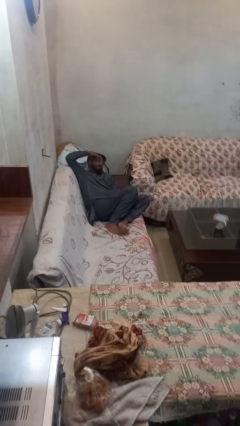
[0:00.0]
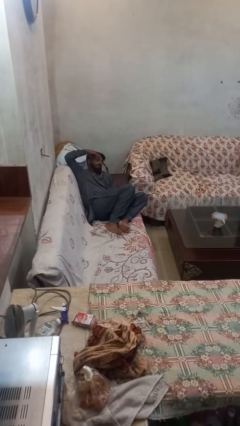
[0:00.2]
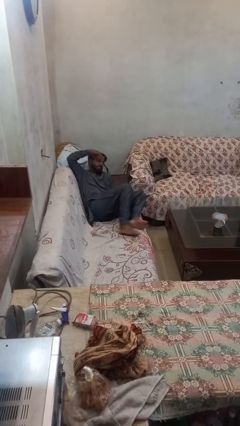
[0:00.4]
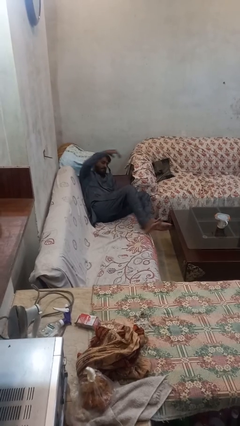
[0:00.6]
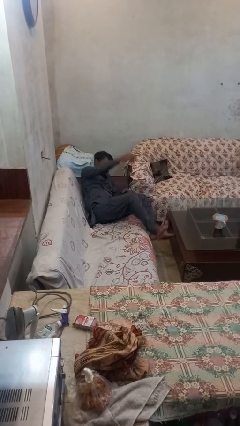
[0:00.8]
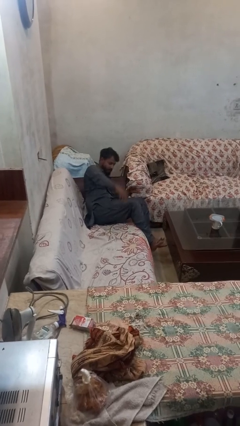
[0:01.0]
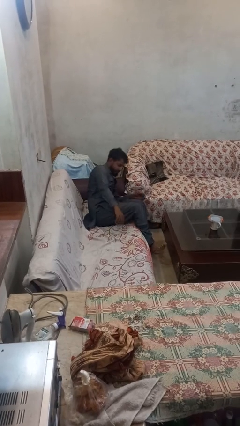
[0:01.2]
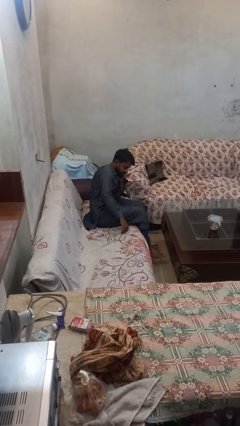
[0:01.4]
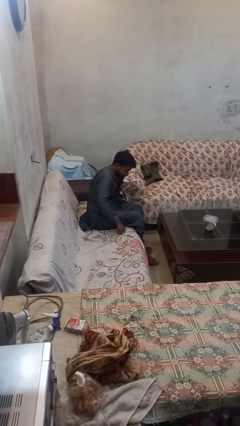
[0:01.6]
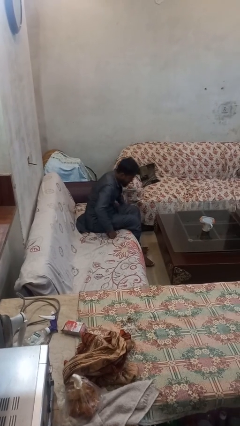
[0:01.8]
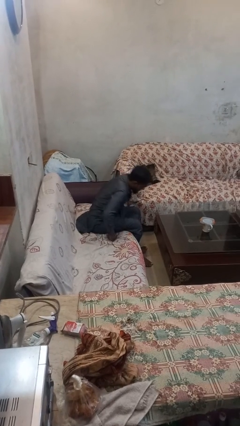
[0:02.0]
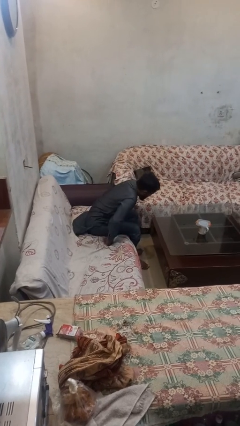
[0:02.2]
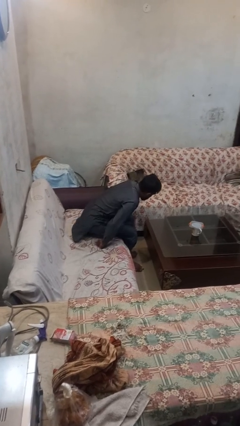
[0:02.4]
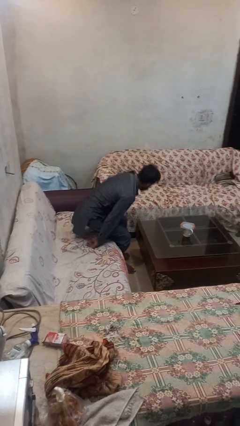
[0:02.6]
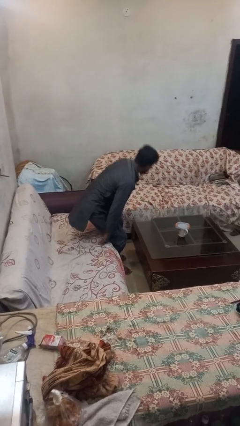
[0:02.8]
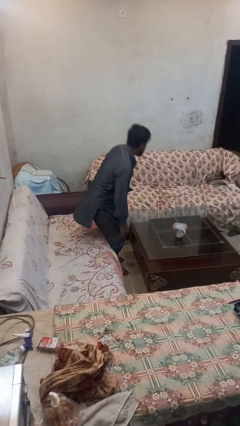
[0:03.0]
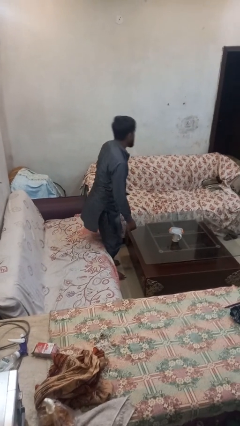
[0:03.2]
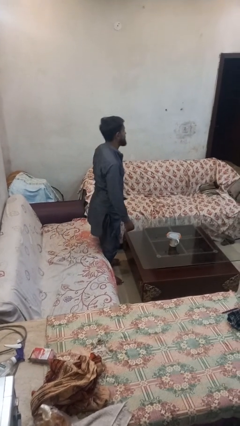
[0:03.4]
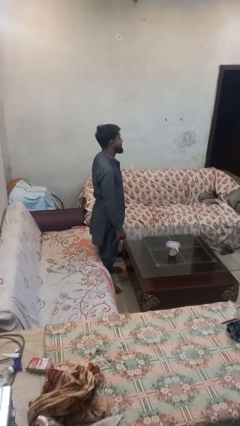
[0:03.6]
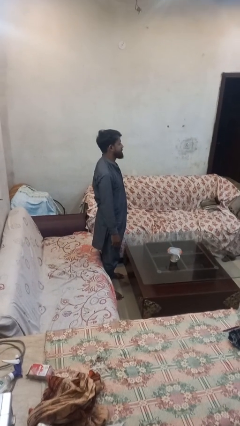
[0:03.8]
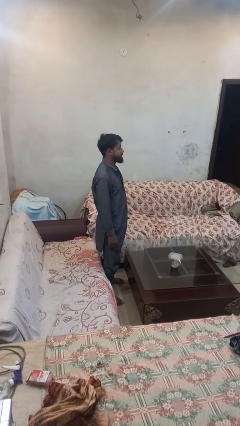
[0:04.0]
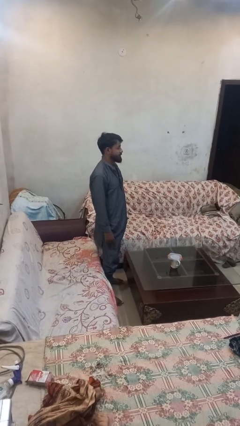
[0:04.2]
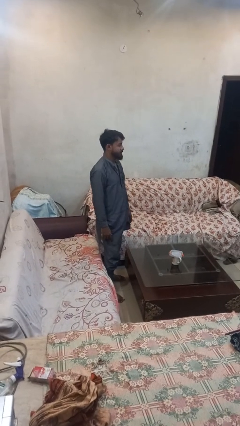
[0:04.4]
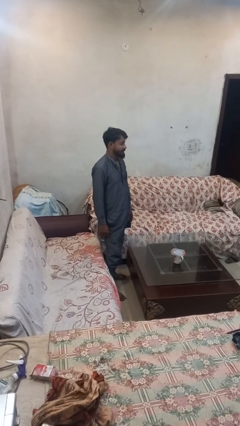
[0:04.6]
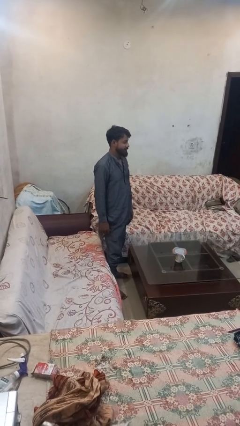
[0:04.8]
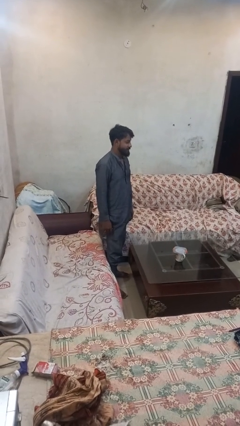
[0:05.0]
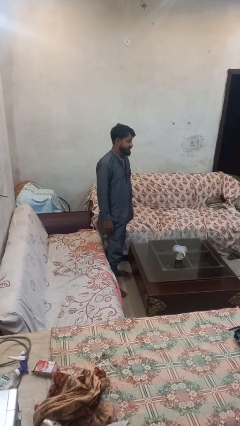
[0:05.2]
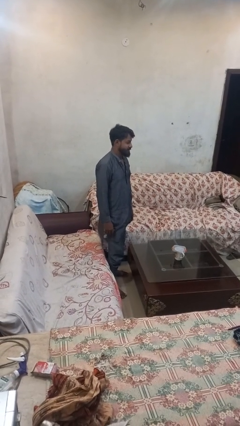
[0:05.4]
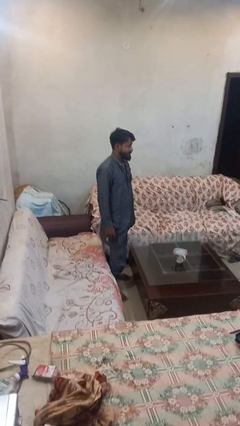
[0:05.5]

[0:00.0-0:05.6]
person stands up

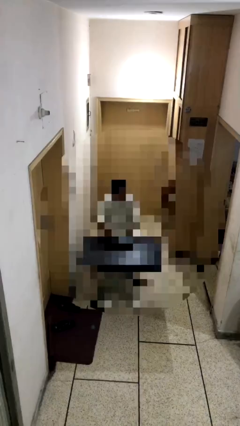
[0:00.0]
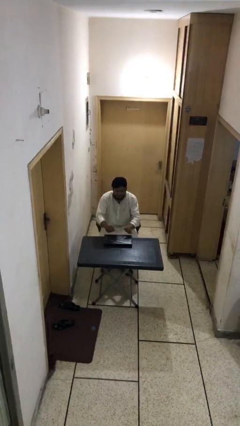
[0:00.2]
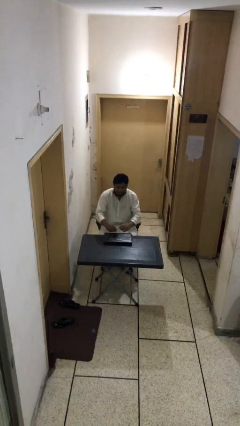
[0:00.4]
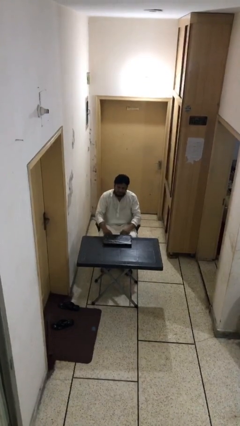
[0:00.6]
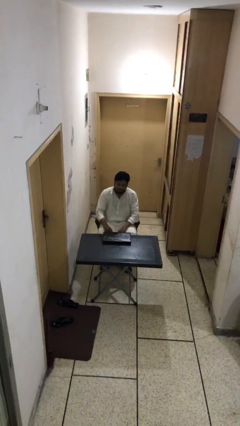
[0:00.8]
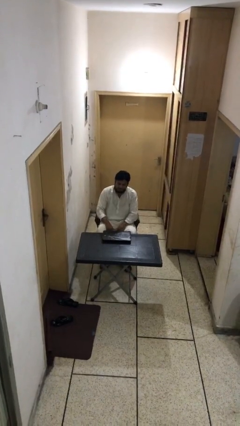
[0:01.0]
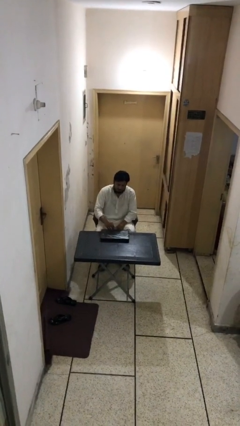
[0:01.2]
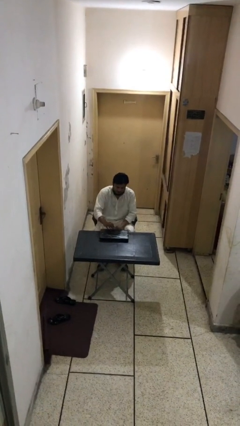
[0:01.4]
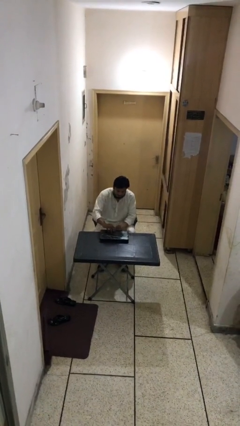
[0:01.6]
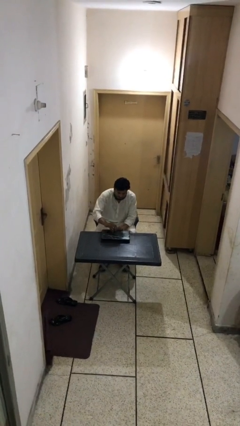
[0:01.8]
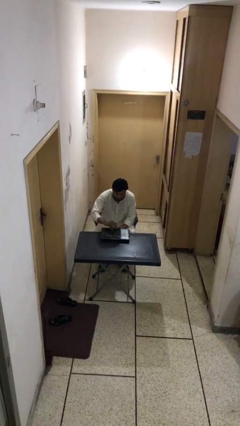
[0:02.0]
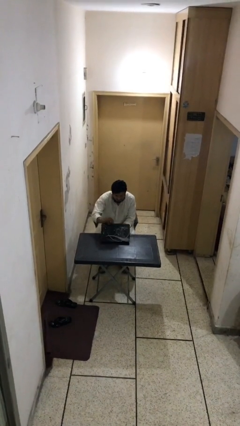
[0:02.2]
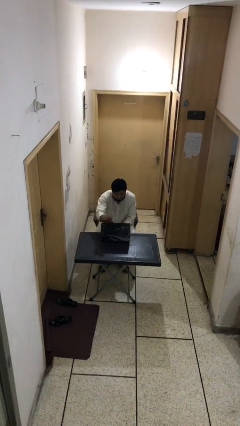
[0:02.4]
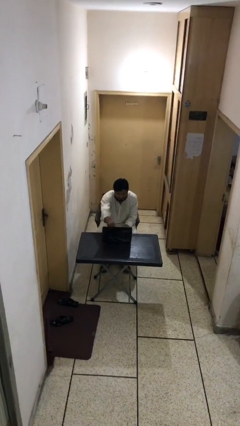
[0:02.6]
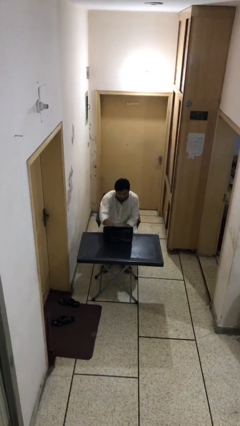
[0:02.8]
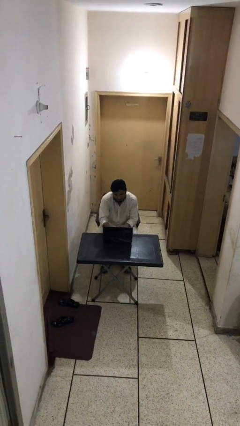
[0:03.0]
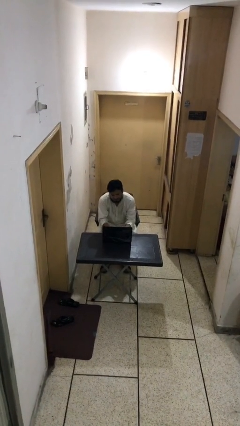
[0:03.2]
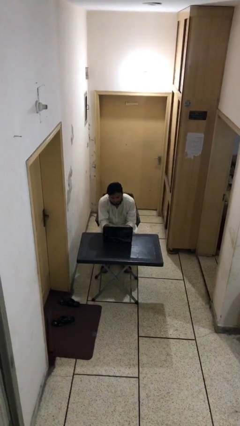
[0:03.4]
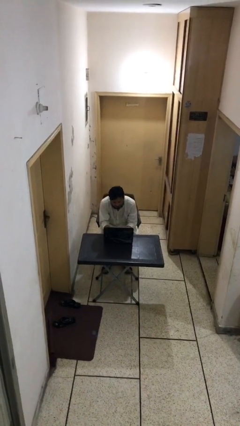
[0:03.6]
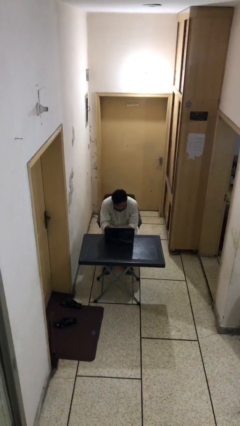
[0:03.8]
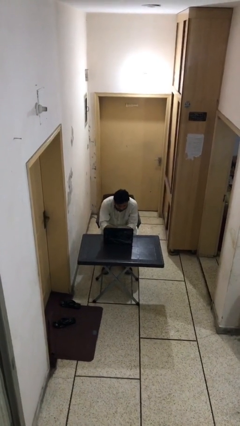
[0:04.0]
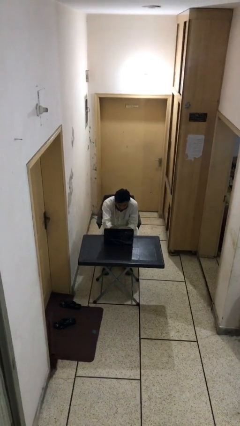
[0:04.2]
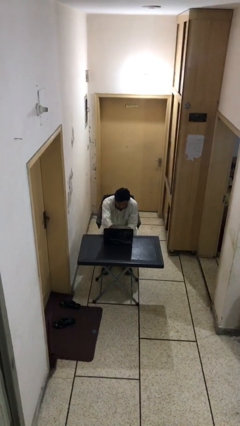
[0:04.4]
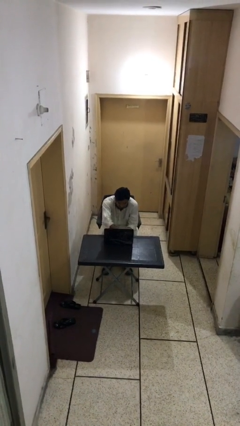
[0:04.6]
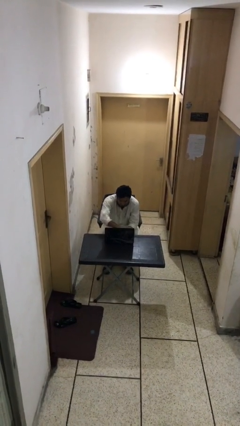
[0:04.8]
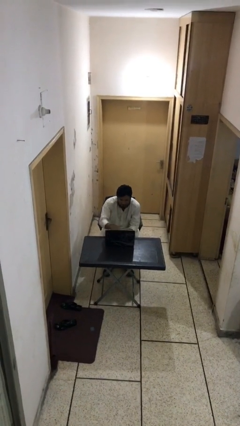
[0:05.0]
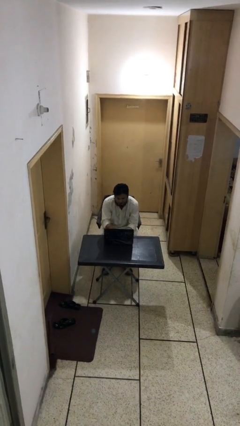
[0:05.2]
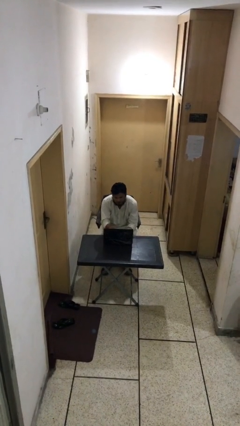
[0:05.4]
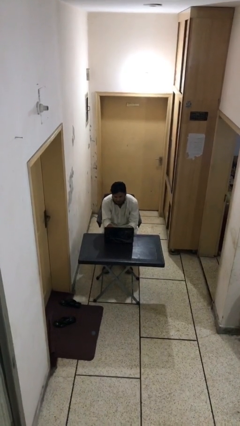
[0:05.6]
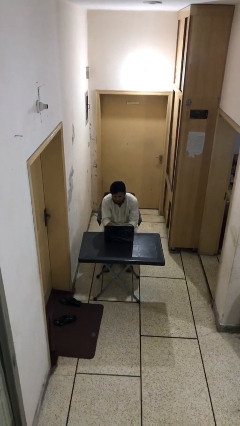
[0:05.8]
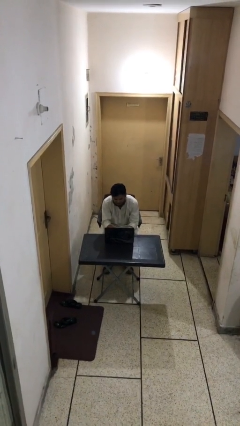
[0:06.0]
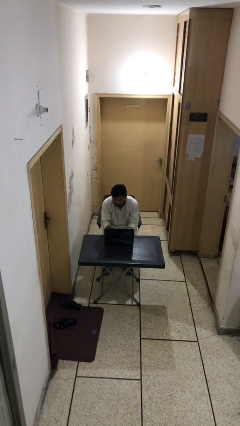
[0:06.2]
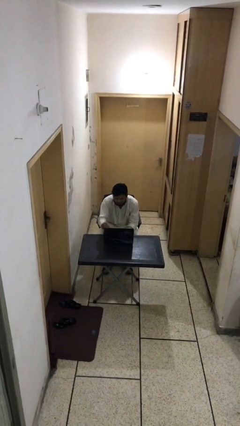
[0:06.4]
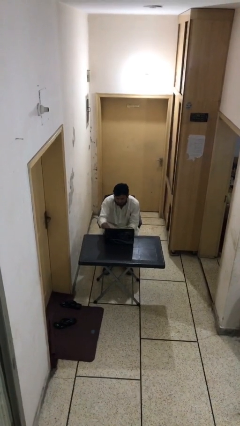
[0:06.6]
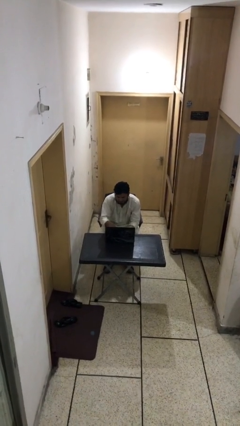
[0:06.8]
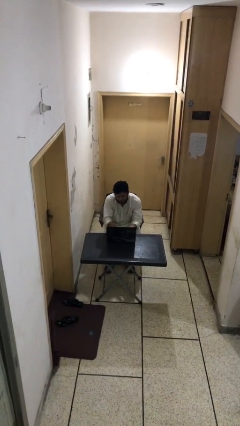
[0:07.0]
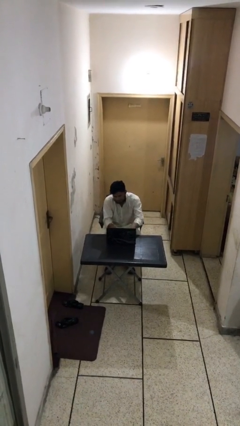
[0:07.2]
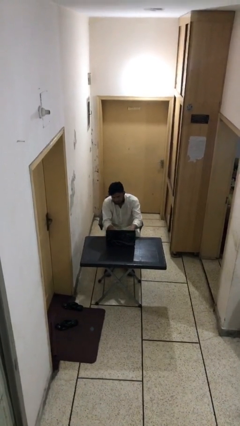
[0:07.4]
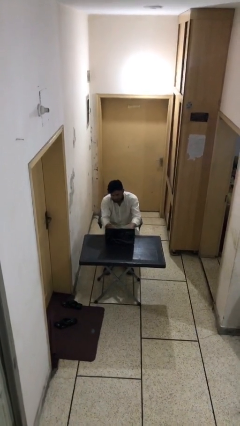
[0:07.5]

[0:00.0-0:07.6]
person interacts with laptop

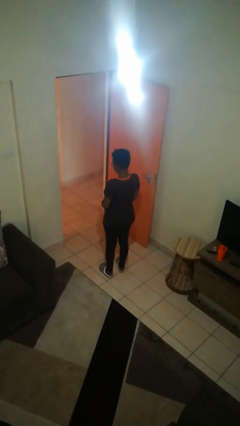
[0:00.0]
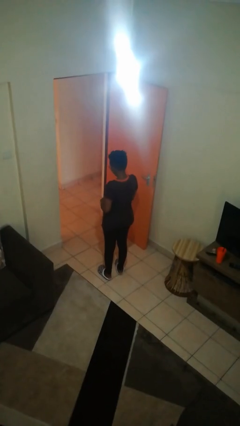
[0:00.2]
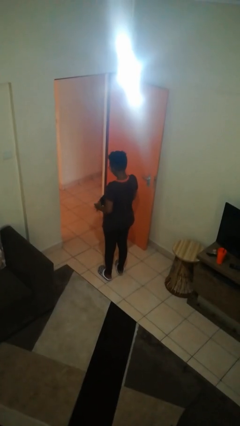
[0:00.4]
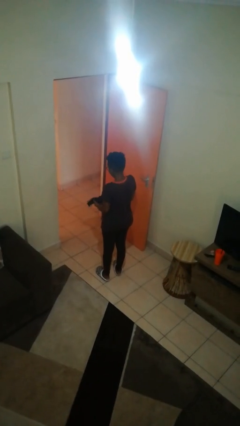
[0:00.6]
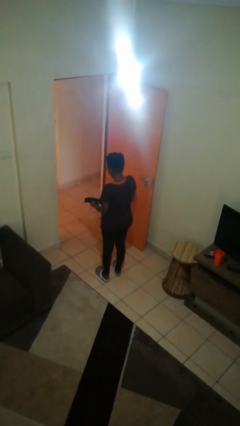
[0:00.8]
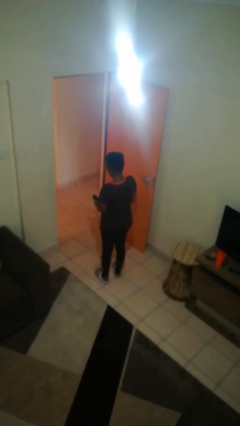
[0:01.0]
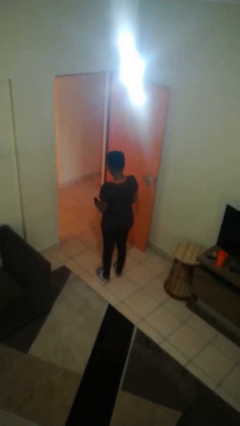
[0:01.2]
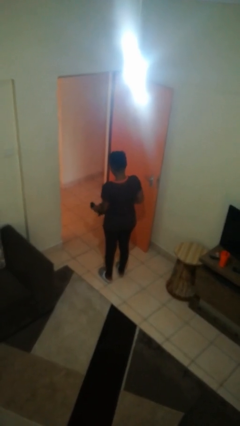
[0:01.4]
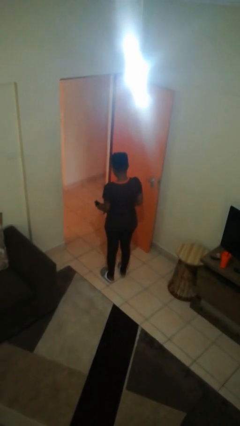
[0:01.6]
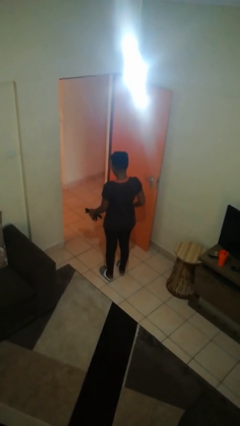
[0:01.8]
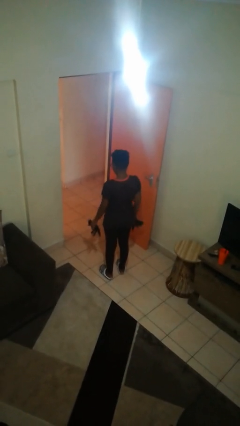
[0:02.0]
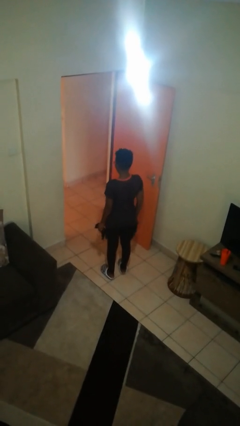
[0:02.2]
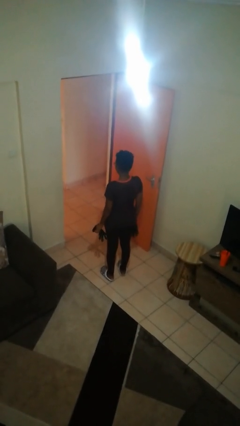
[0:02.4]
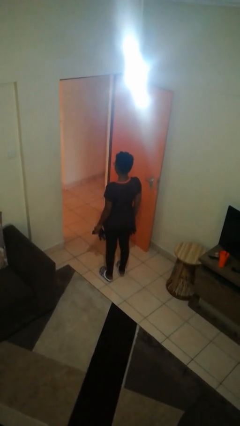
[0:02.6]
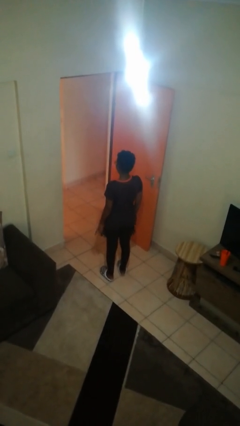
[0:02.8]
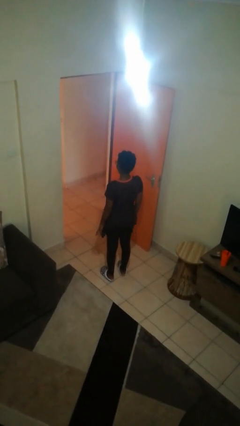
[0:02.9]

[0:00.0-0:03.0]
person takes off gloves

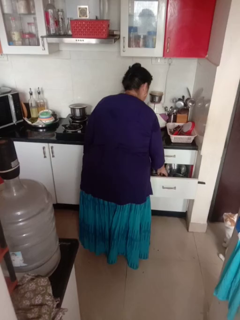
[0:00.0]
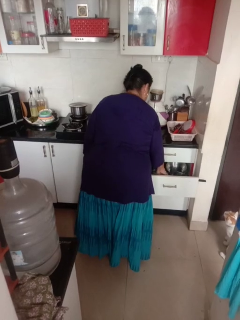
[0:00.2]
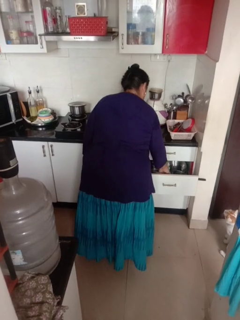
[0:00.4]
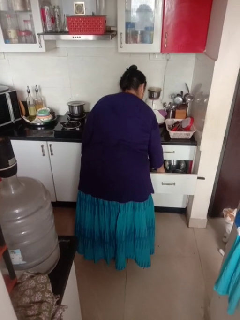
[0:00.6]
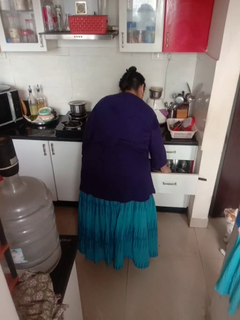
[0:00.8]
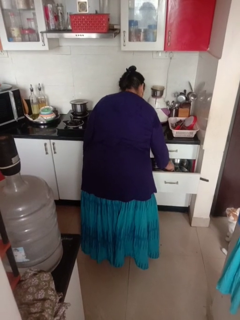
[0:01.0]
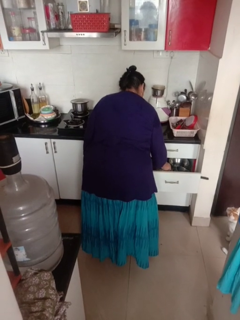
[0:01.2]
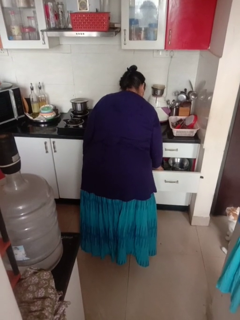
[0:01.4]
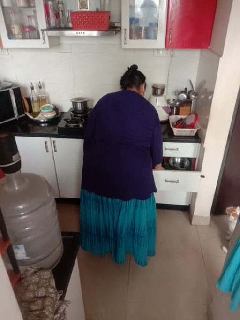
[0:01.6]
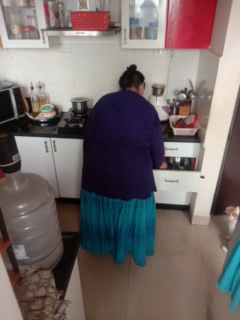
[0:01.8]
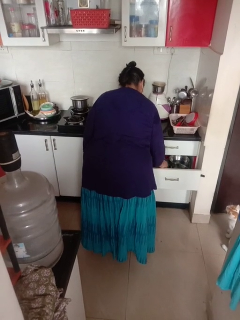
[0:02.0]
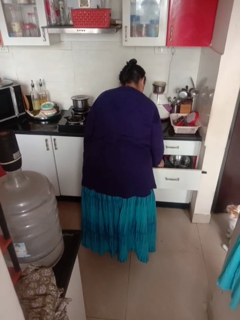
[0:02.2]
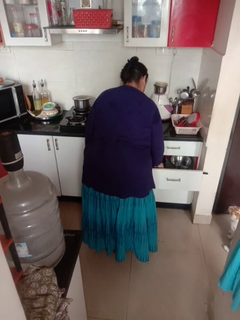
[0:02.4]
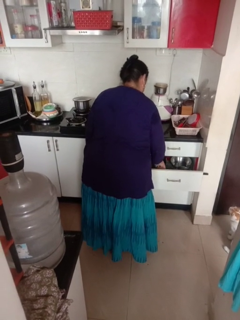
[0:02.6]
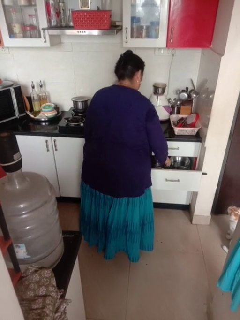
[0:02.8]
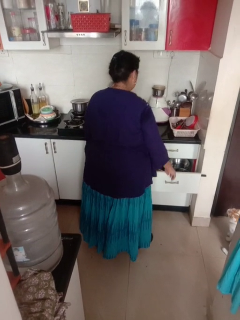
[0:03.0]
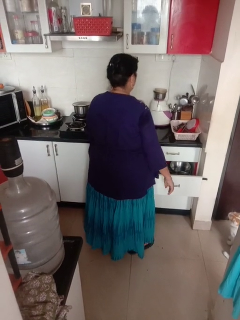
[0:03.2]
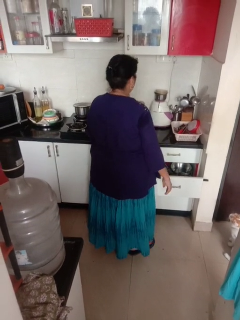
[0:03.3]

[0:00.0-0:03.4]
person searches in kitchen drawer
